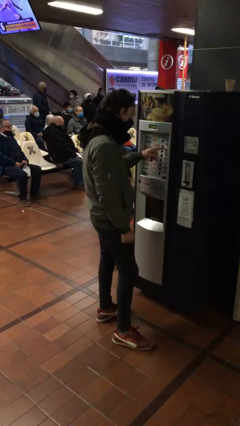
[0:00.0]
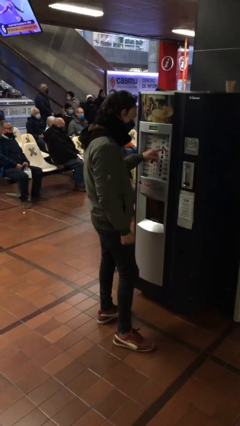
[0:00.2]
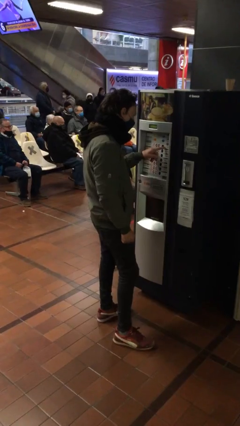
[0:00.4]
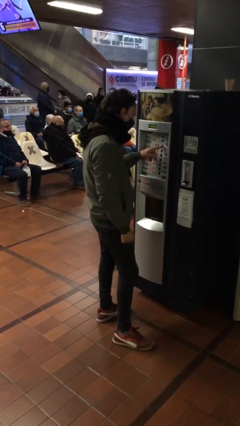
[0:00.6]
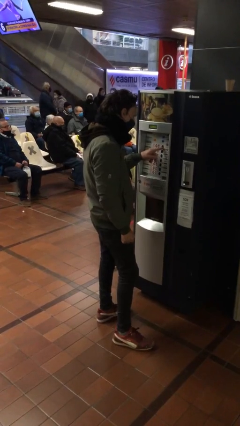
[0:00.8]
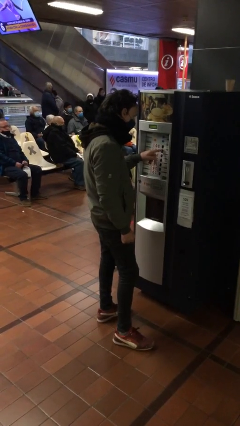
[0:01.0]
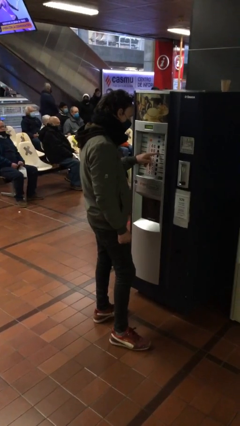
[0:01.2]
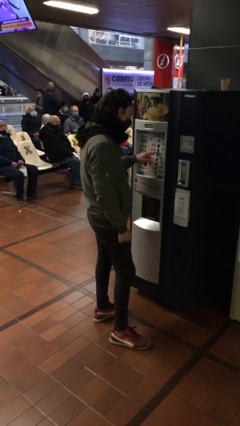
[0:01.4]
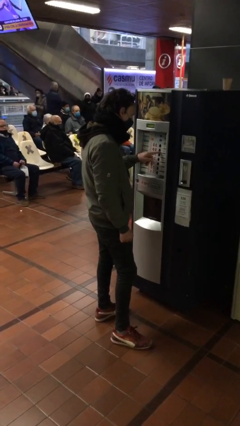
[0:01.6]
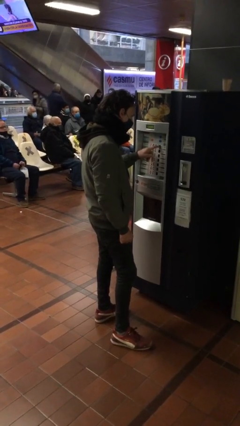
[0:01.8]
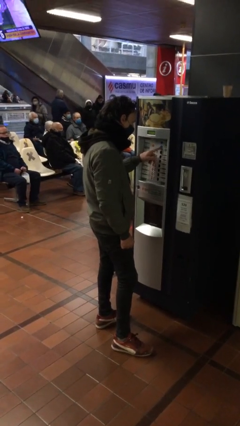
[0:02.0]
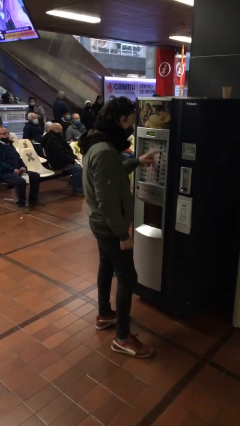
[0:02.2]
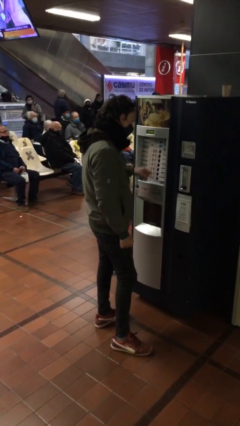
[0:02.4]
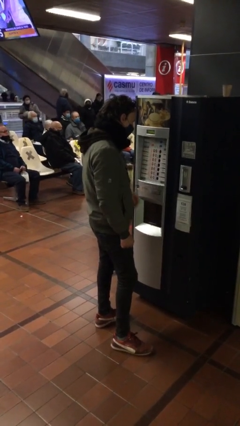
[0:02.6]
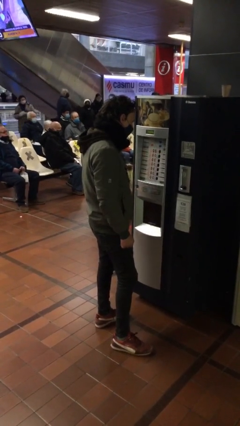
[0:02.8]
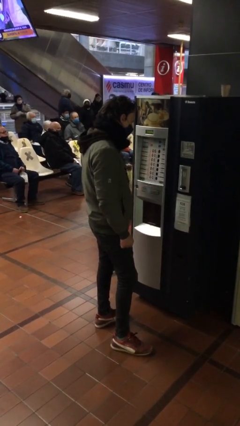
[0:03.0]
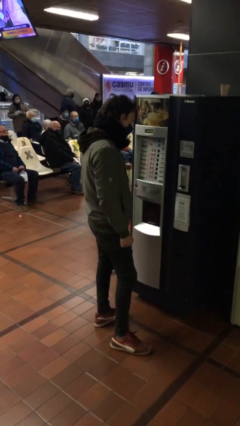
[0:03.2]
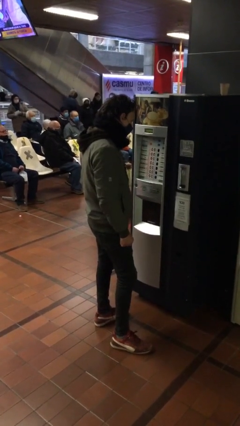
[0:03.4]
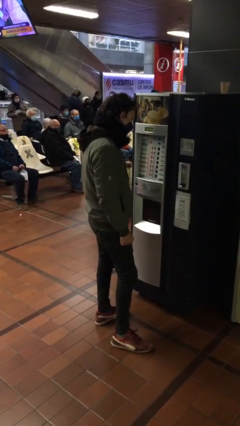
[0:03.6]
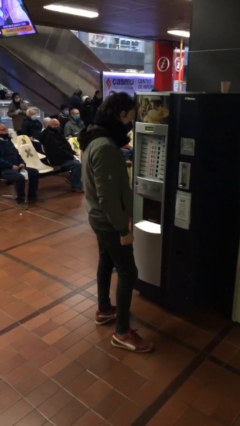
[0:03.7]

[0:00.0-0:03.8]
person purchases from machine

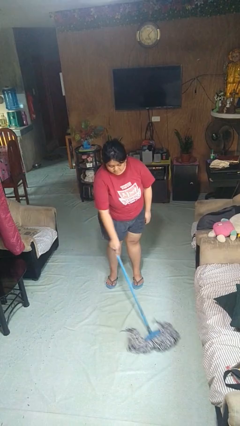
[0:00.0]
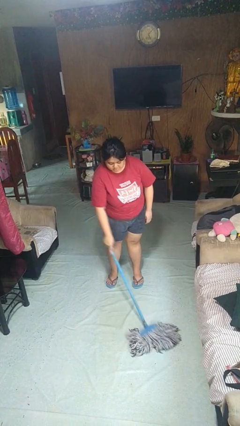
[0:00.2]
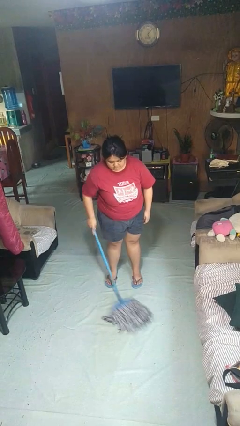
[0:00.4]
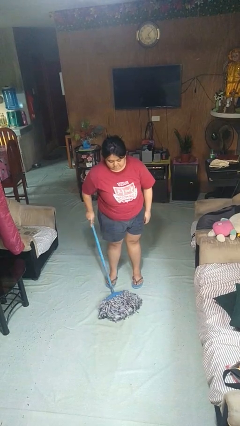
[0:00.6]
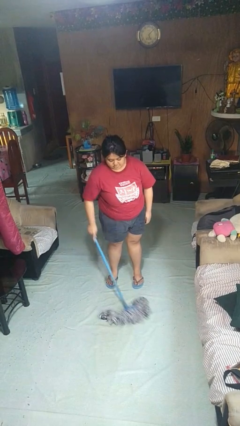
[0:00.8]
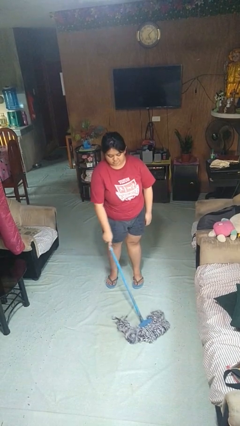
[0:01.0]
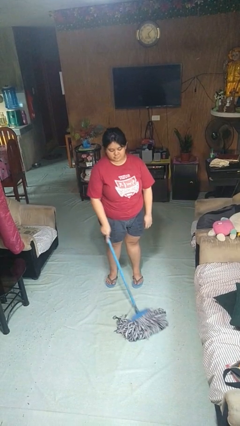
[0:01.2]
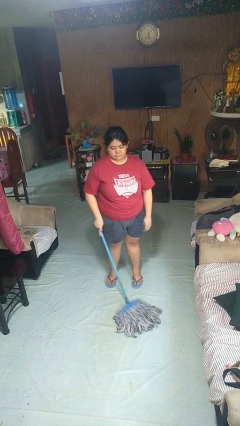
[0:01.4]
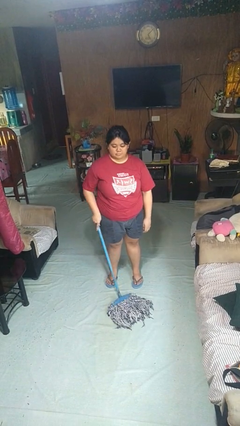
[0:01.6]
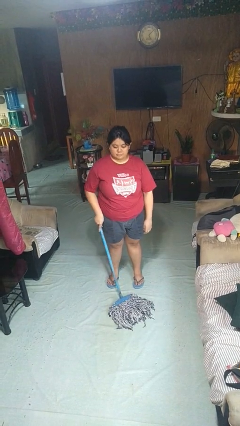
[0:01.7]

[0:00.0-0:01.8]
person mops

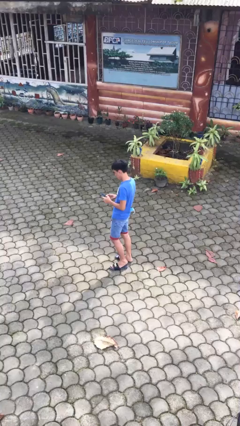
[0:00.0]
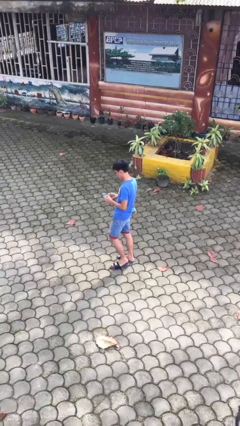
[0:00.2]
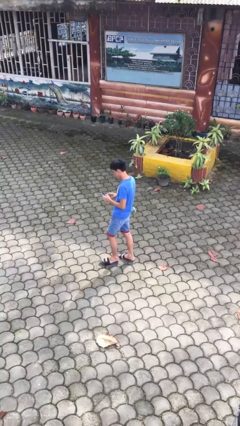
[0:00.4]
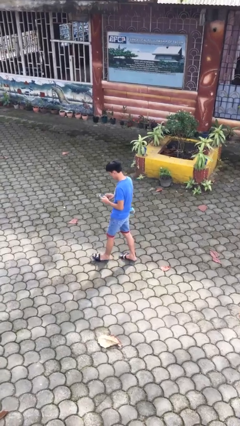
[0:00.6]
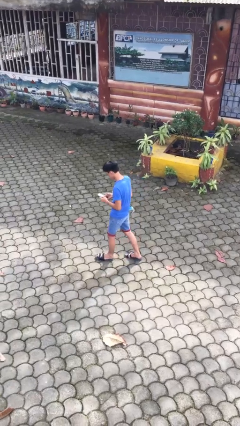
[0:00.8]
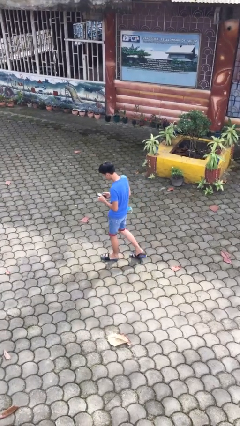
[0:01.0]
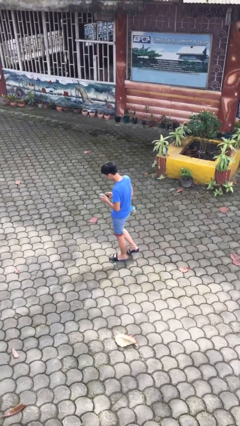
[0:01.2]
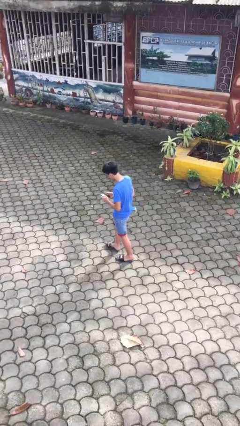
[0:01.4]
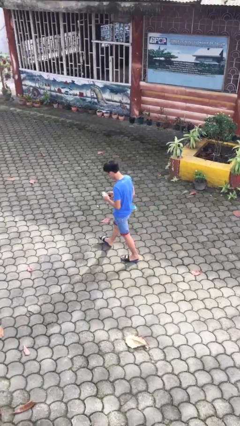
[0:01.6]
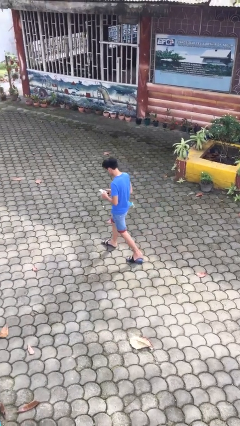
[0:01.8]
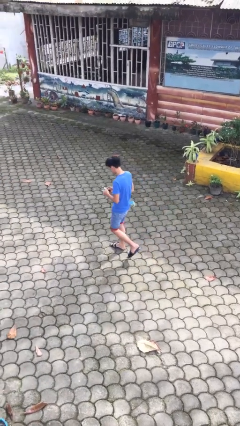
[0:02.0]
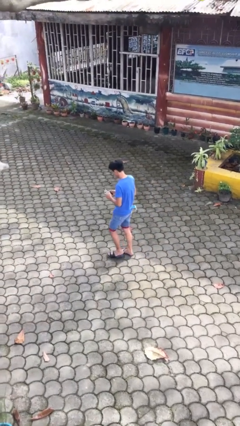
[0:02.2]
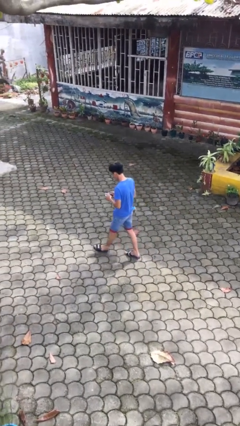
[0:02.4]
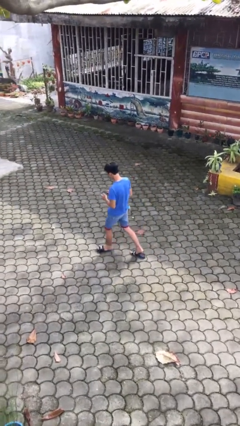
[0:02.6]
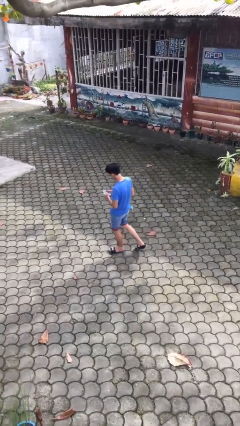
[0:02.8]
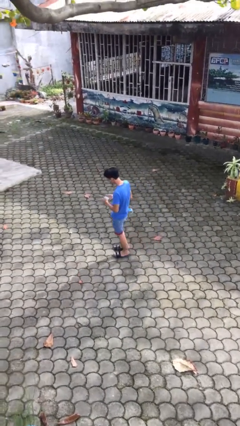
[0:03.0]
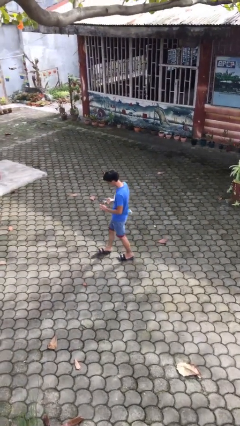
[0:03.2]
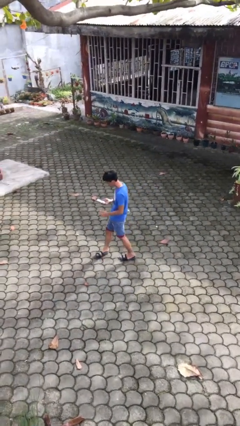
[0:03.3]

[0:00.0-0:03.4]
person texts on phone

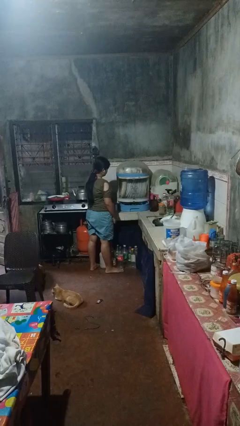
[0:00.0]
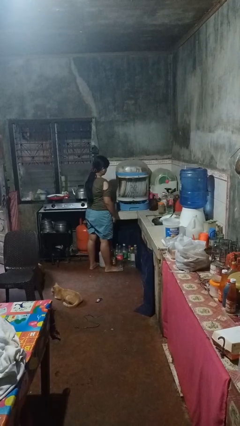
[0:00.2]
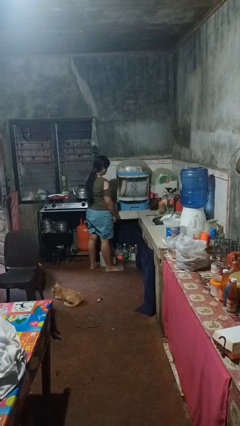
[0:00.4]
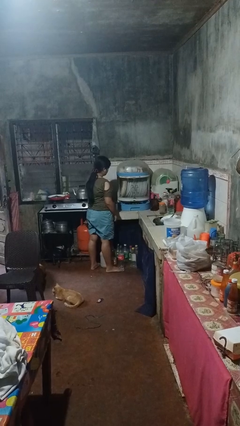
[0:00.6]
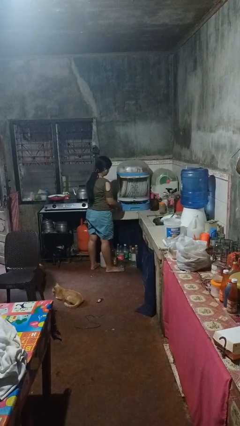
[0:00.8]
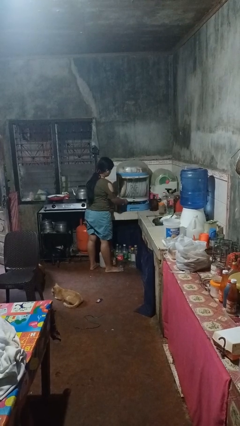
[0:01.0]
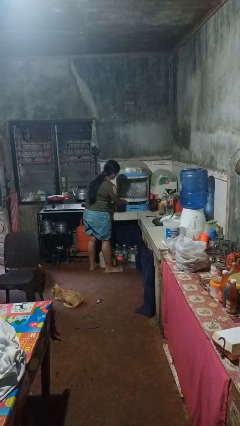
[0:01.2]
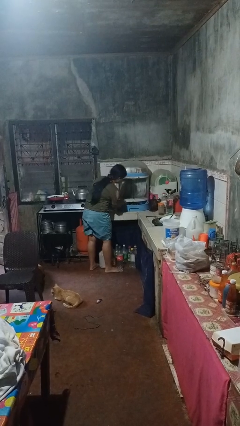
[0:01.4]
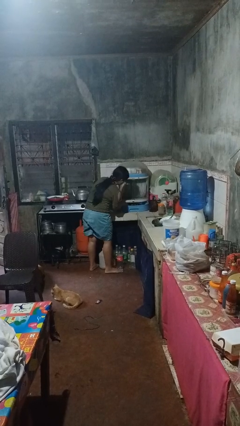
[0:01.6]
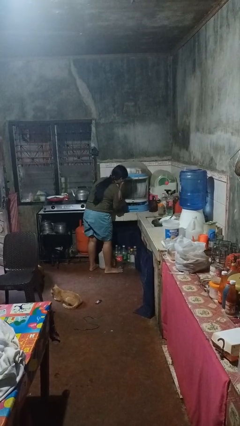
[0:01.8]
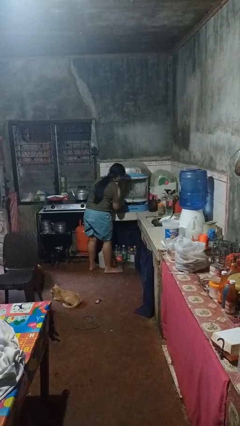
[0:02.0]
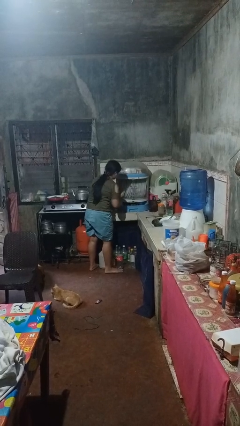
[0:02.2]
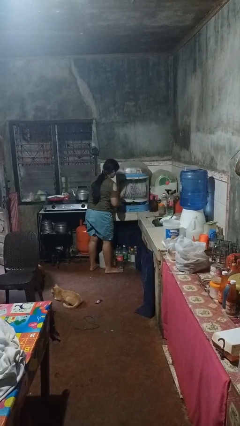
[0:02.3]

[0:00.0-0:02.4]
person searches in kitchen drawer

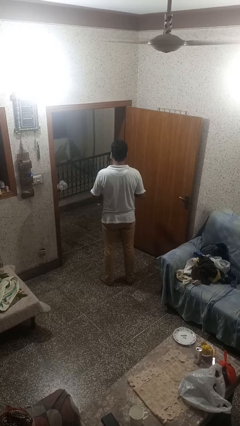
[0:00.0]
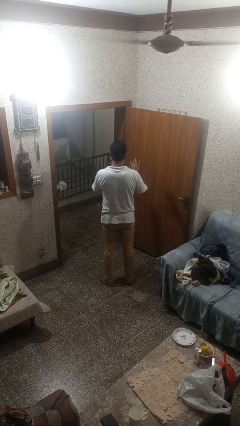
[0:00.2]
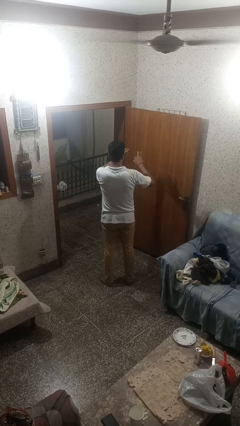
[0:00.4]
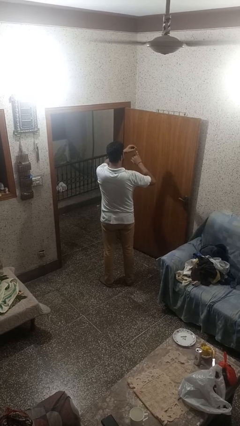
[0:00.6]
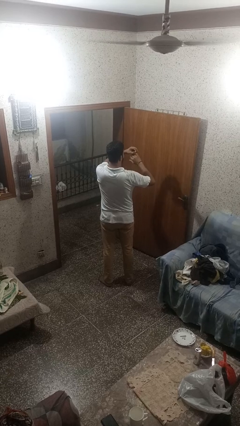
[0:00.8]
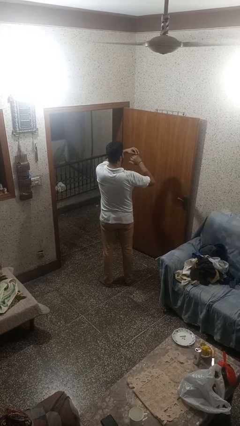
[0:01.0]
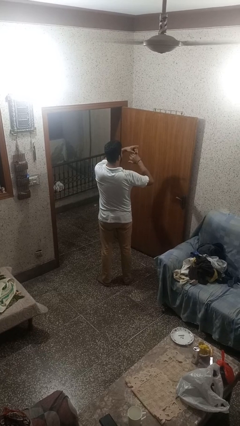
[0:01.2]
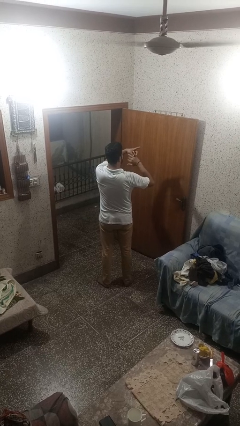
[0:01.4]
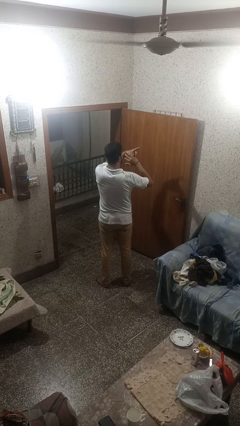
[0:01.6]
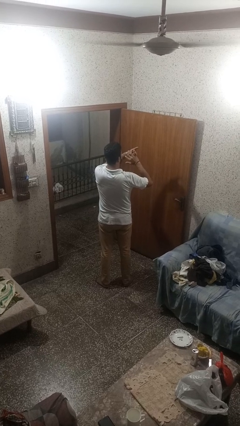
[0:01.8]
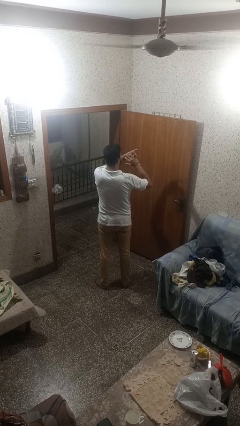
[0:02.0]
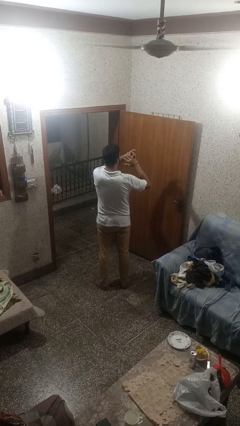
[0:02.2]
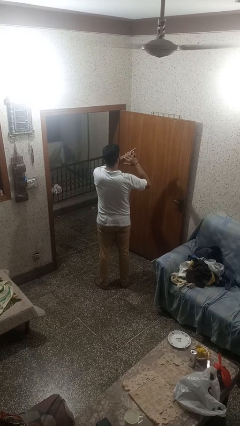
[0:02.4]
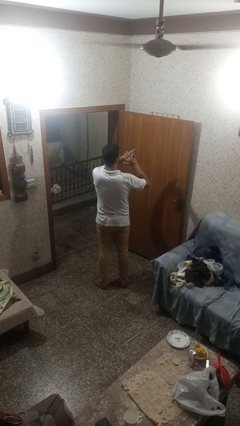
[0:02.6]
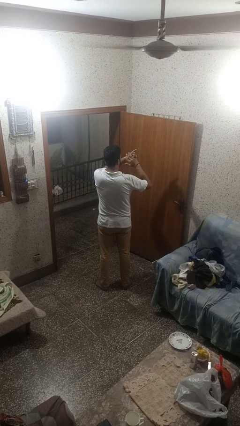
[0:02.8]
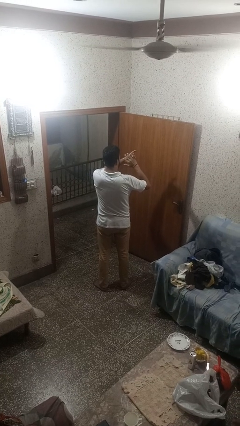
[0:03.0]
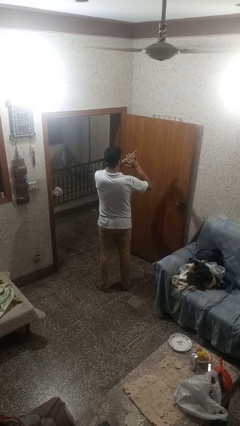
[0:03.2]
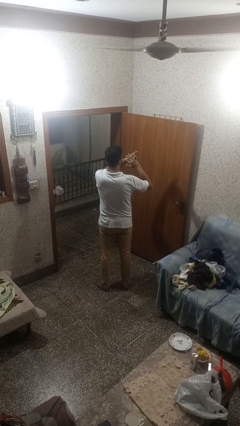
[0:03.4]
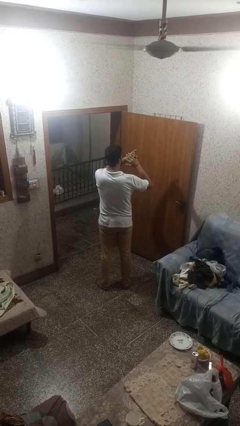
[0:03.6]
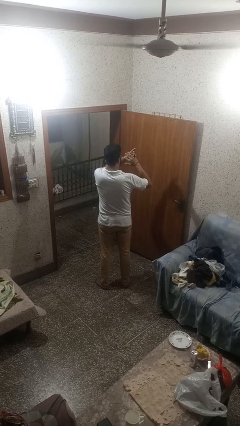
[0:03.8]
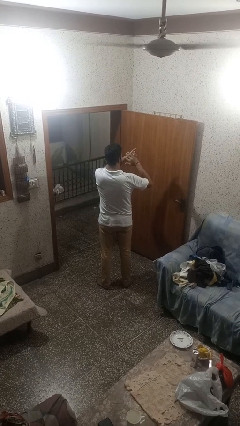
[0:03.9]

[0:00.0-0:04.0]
person puts on ring

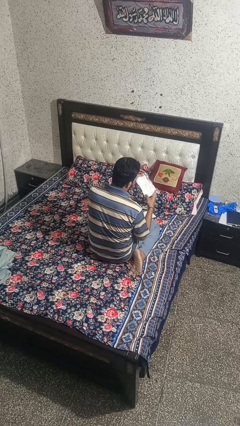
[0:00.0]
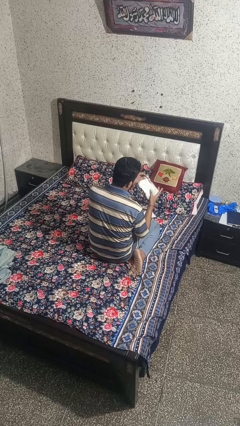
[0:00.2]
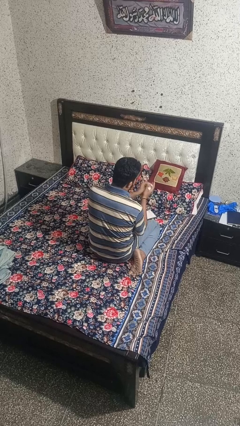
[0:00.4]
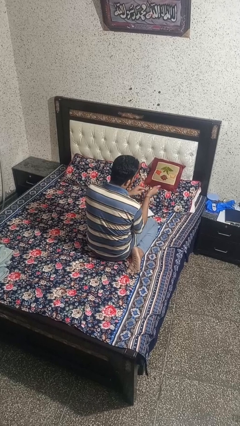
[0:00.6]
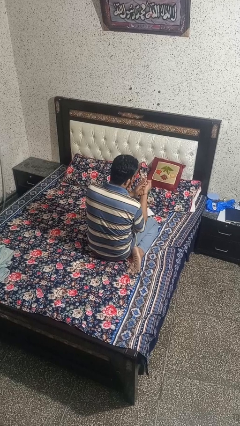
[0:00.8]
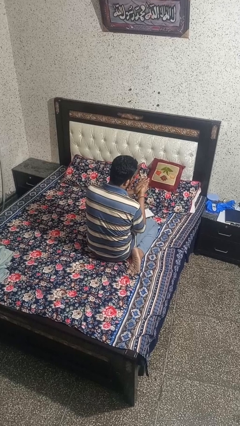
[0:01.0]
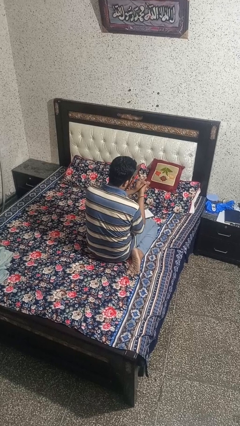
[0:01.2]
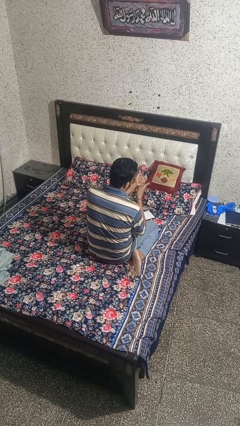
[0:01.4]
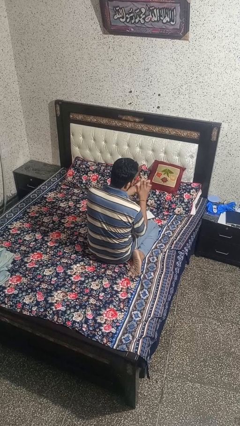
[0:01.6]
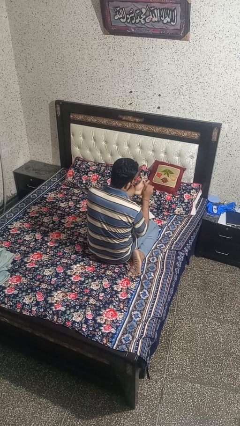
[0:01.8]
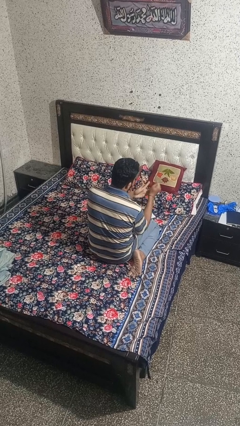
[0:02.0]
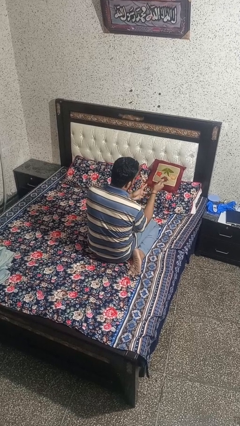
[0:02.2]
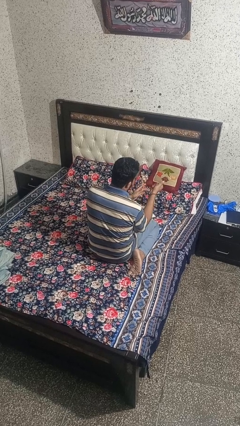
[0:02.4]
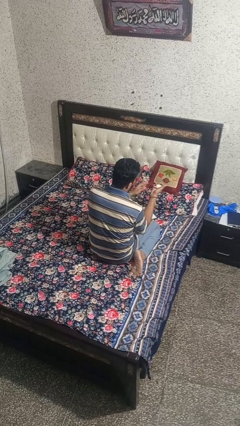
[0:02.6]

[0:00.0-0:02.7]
person crumples paper
